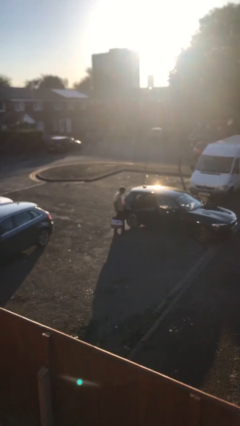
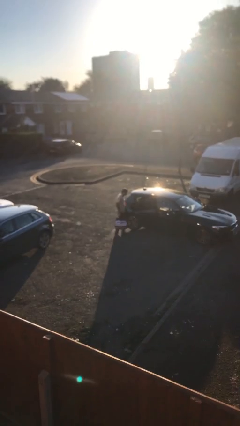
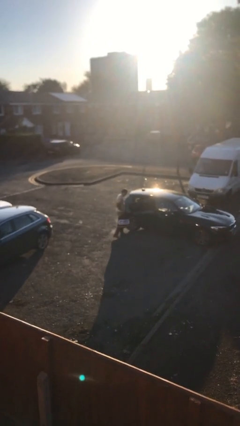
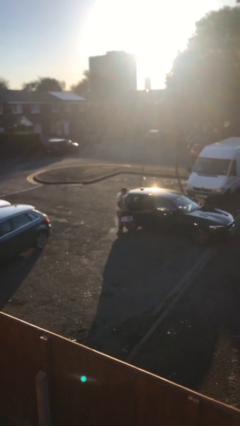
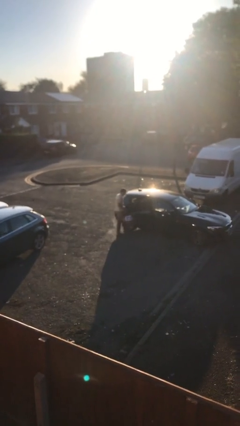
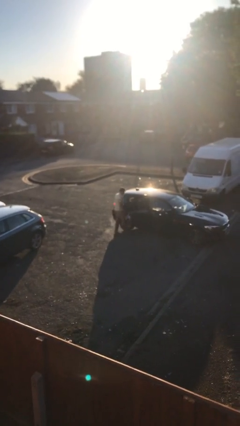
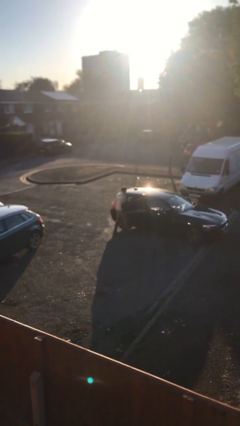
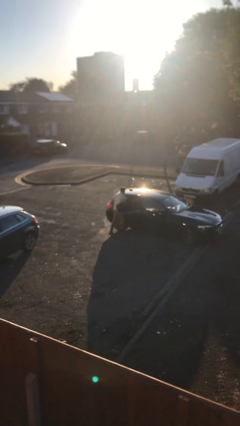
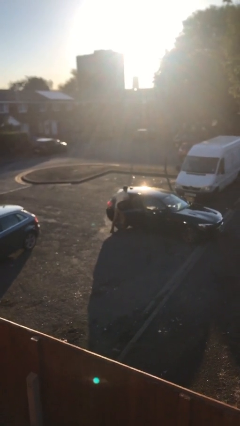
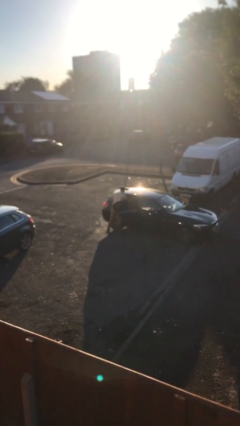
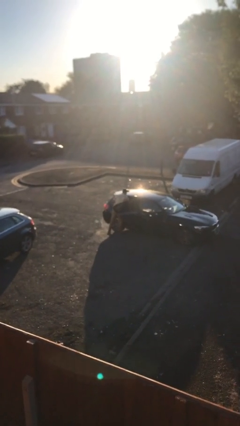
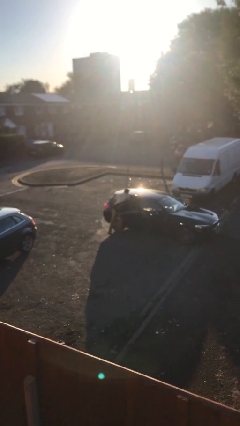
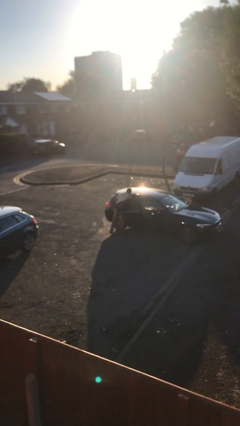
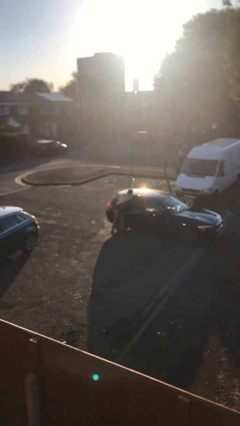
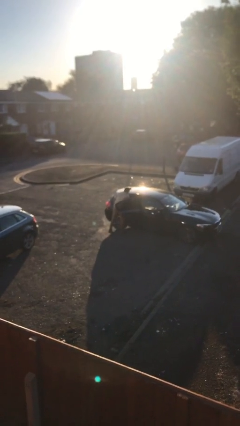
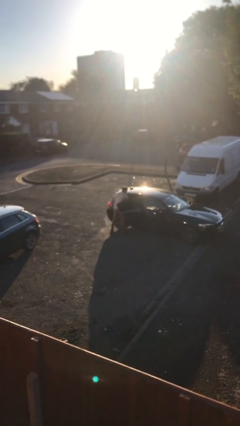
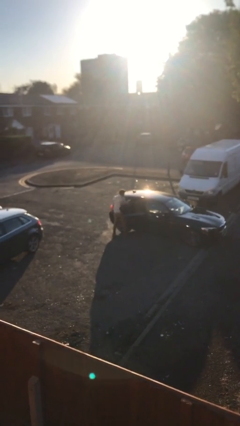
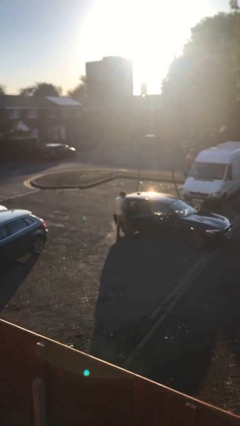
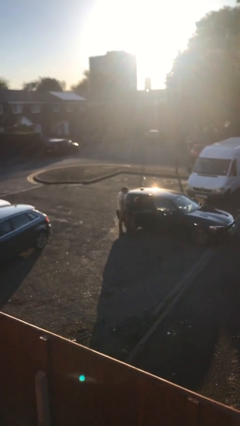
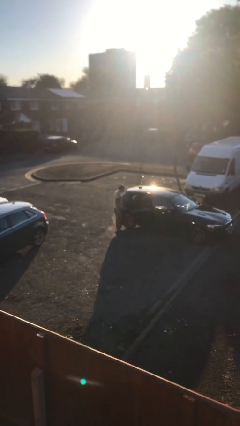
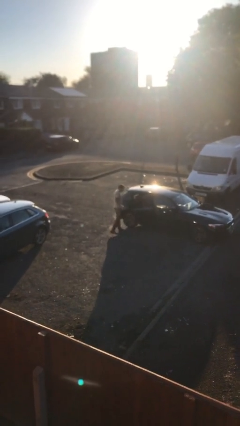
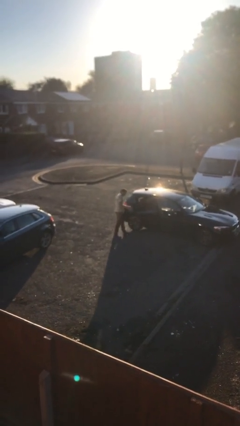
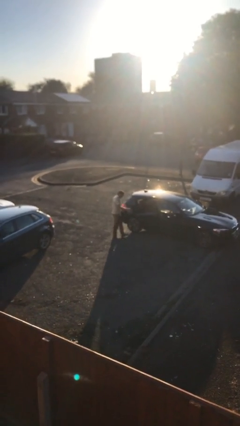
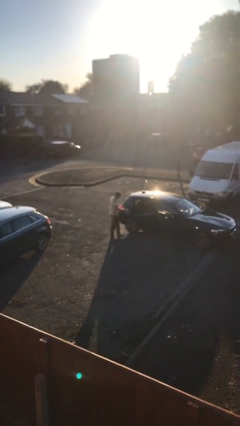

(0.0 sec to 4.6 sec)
person loads car

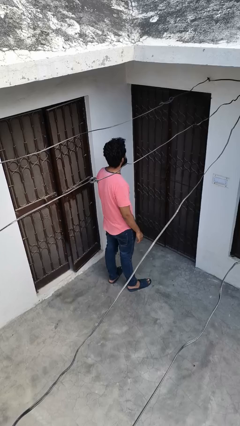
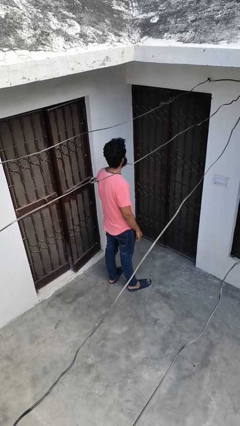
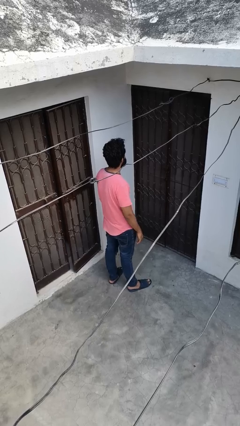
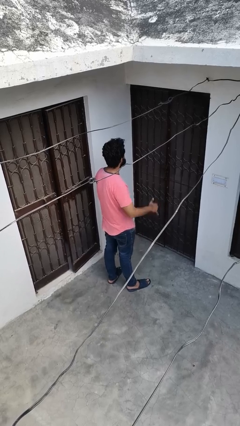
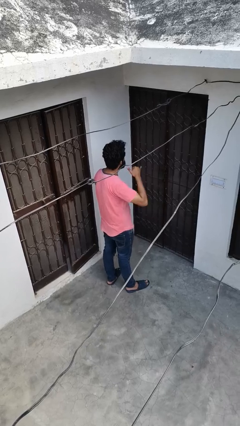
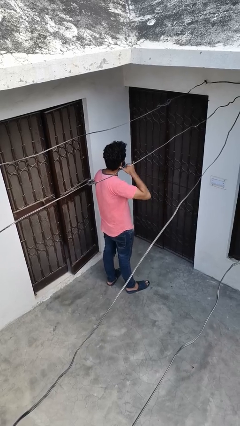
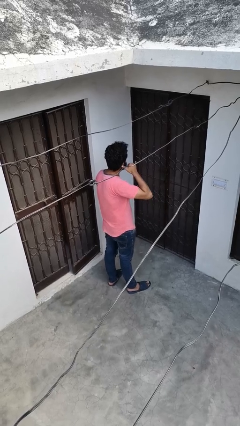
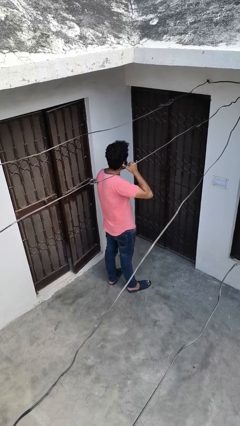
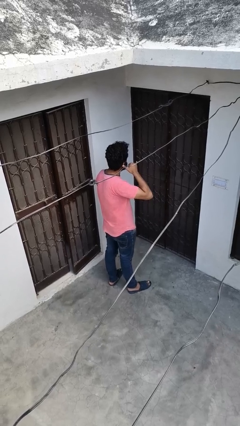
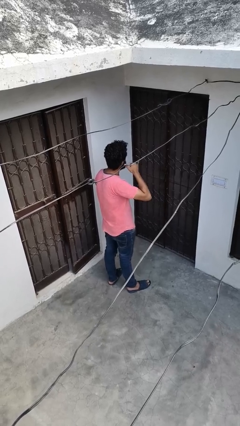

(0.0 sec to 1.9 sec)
person gestures call me

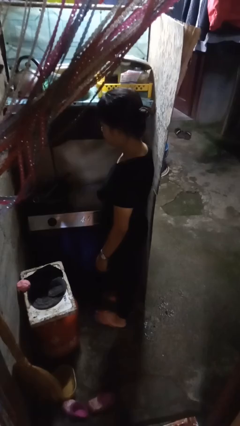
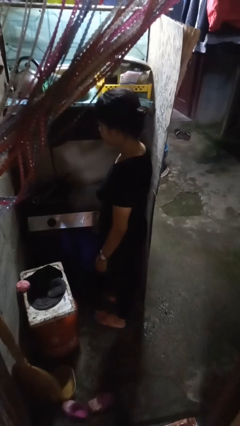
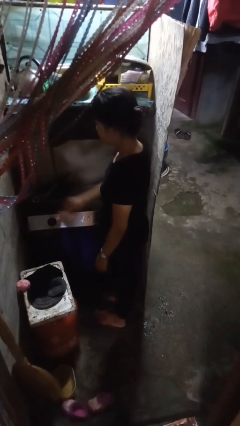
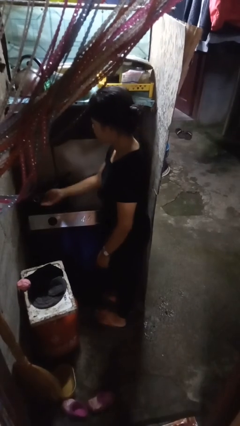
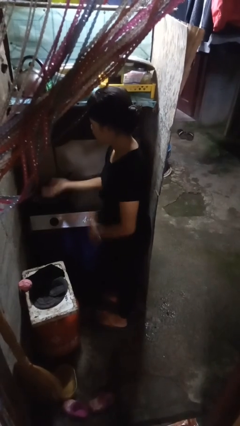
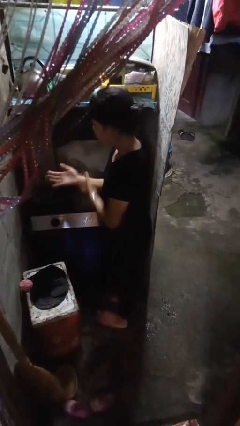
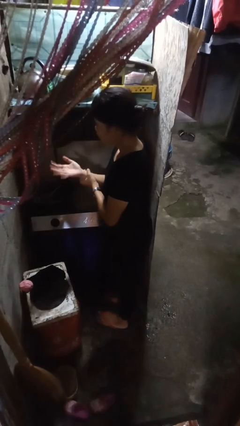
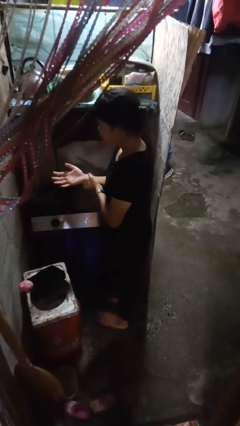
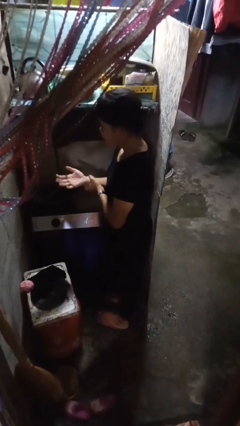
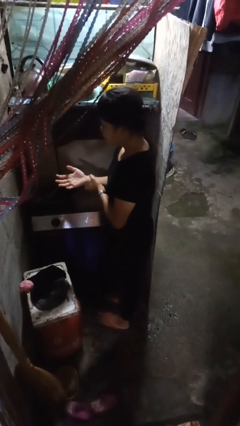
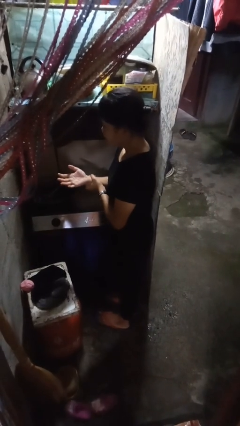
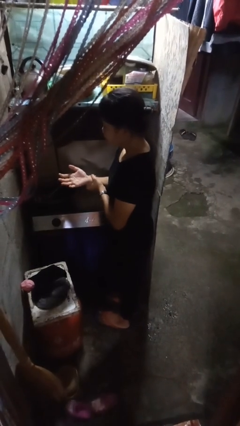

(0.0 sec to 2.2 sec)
person burns hand

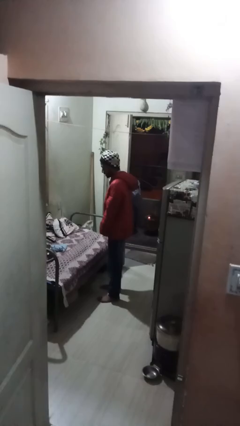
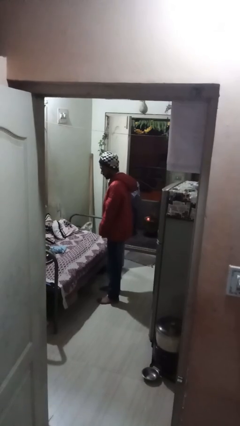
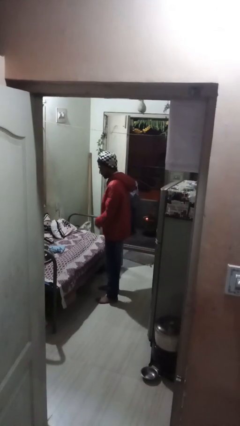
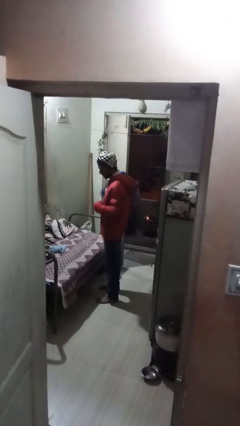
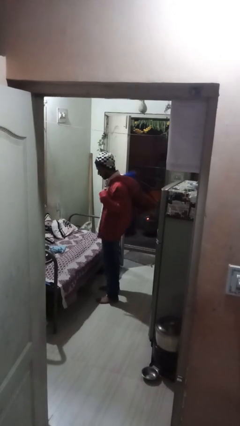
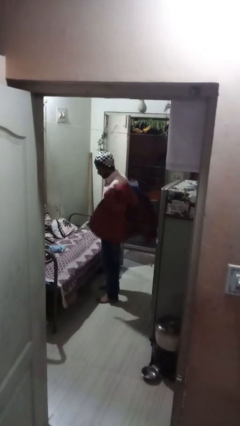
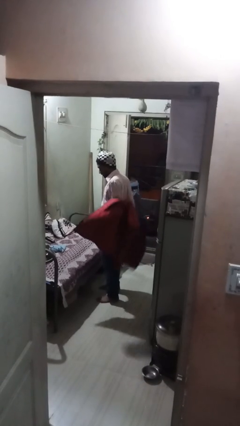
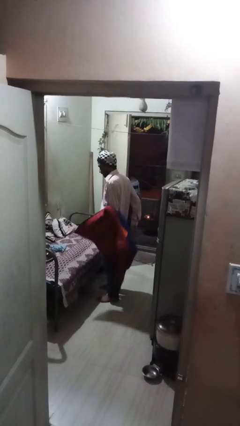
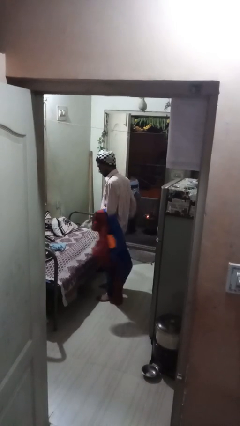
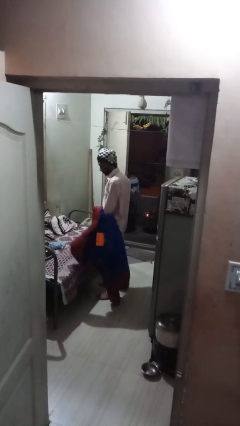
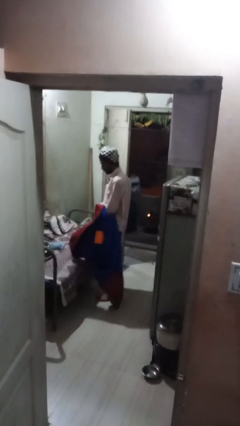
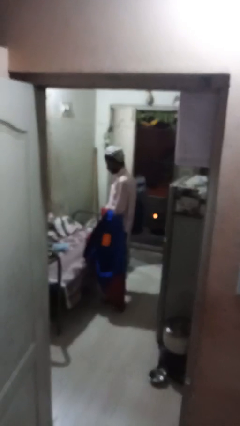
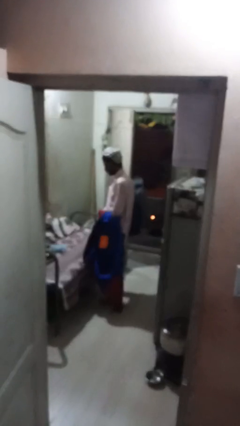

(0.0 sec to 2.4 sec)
person takes off jacket

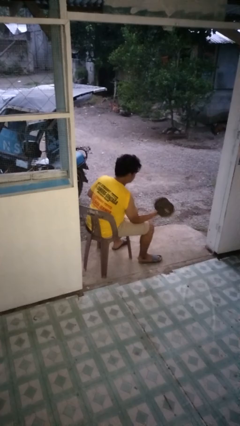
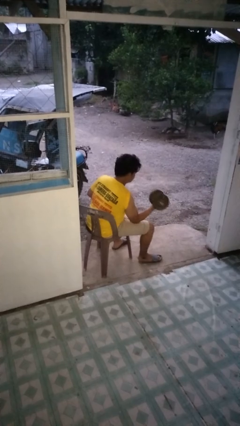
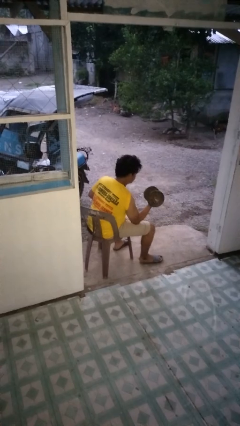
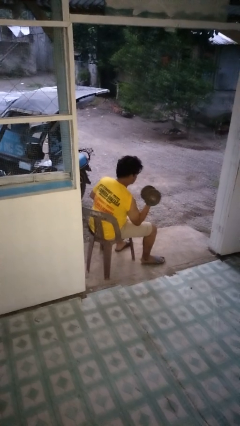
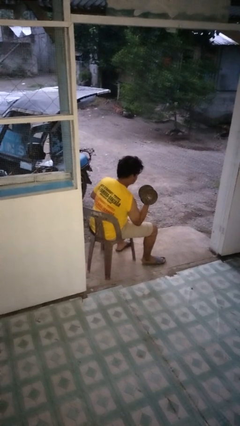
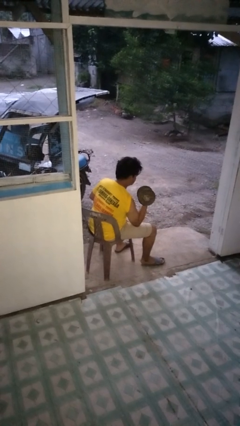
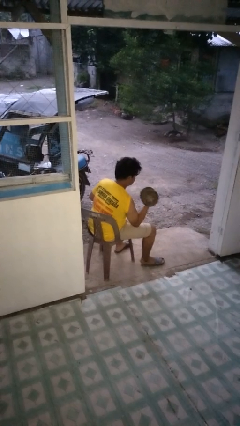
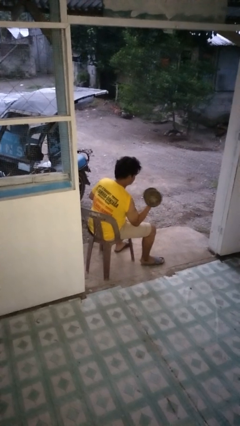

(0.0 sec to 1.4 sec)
person lifts dumbbells

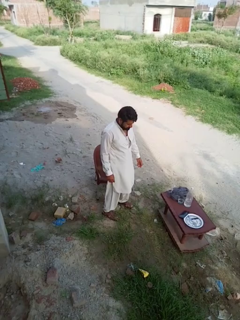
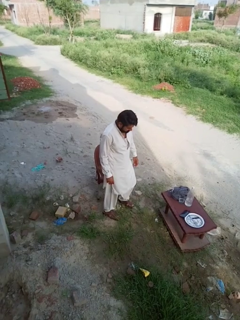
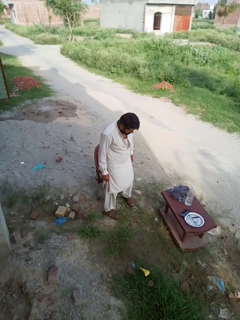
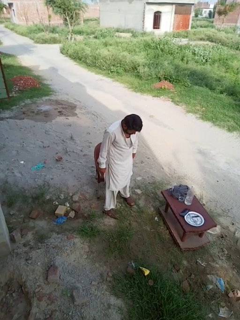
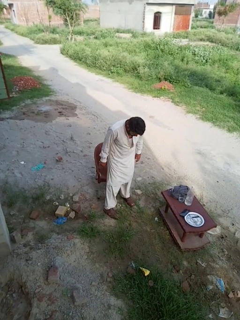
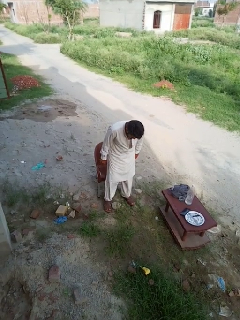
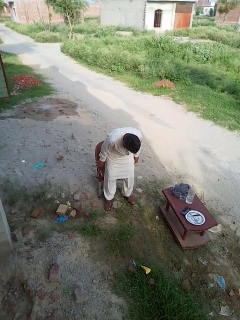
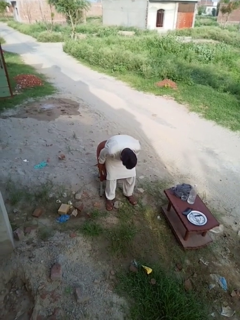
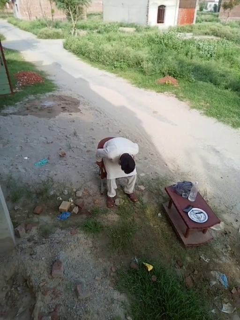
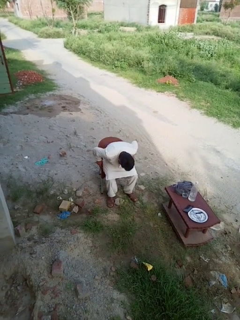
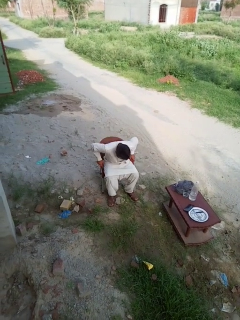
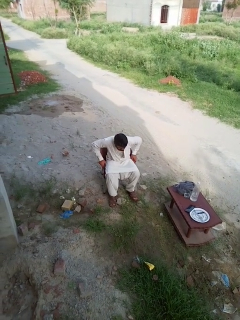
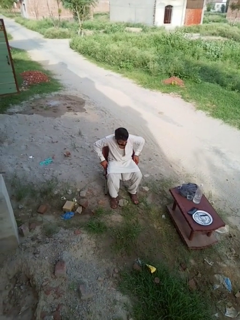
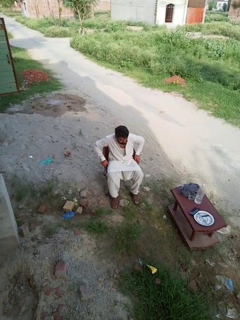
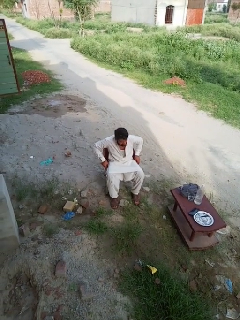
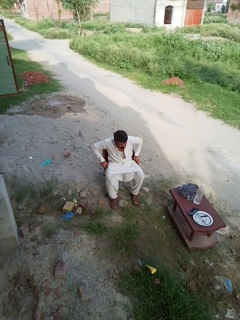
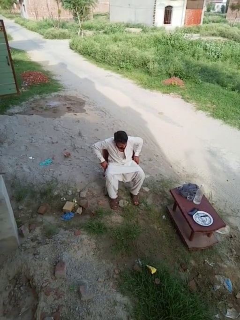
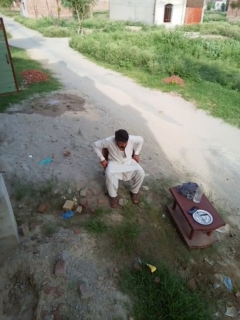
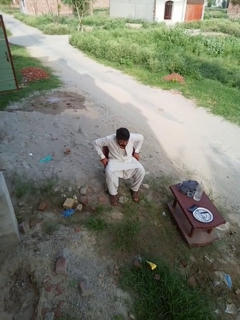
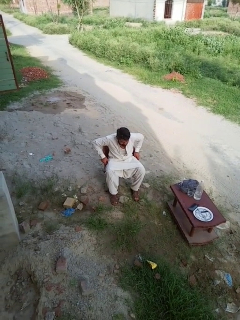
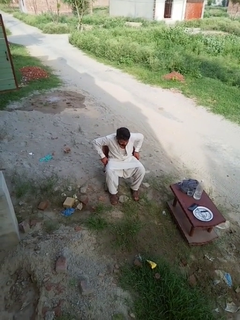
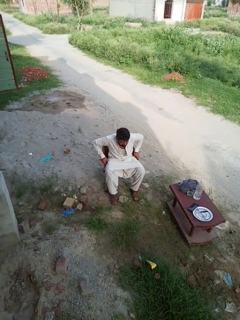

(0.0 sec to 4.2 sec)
person sits down

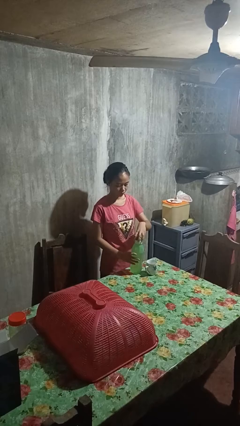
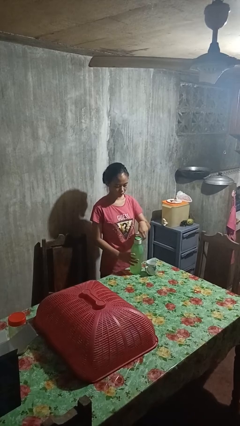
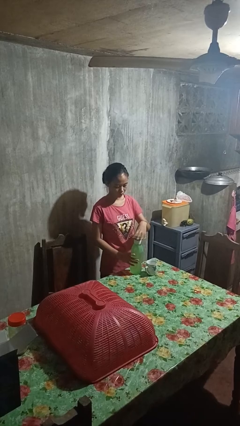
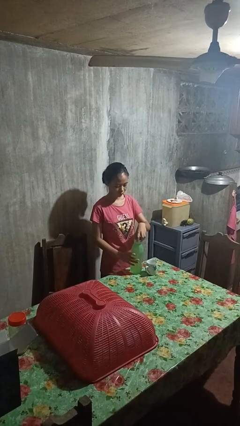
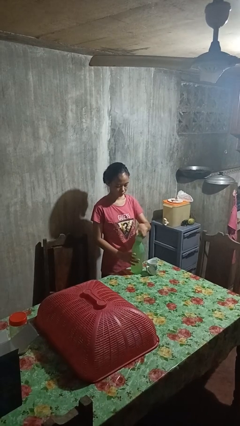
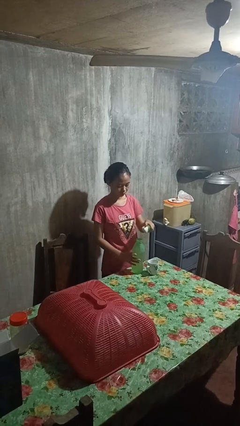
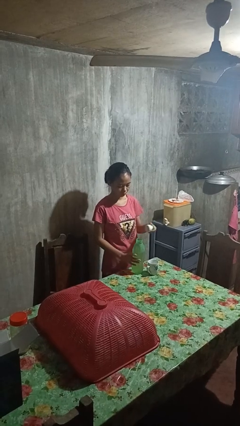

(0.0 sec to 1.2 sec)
person unscrews lid from bottle

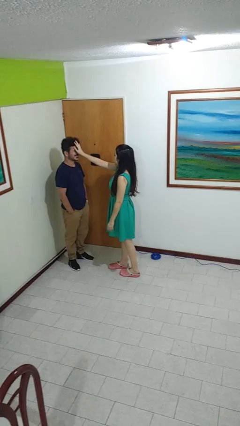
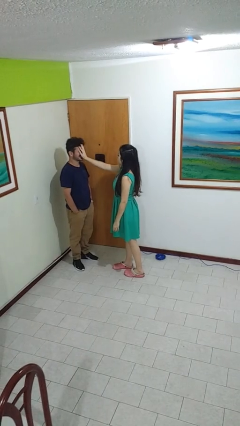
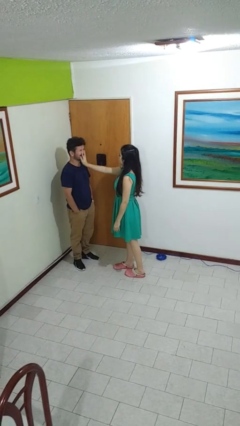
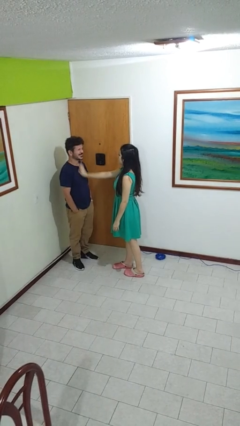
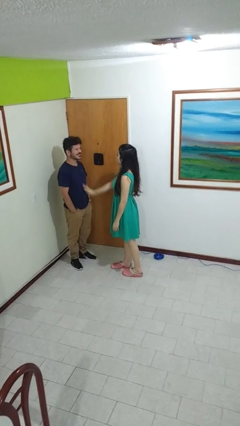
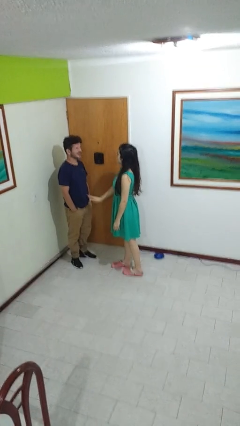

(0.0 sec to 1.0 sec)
person touches face of person
